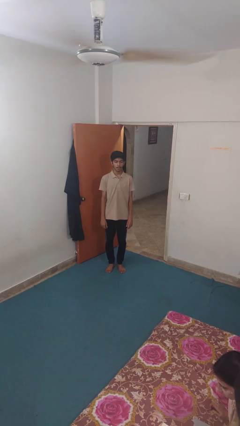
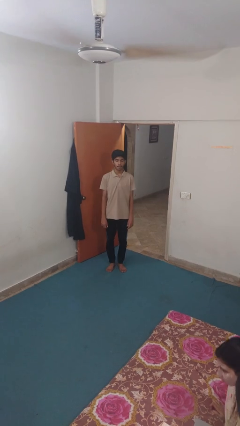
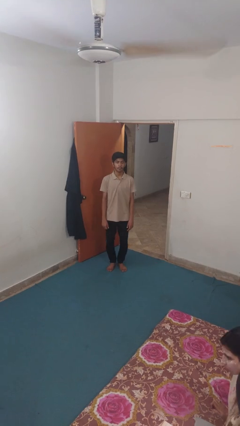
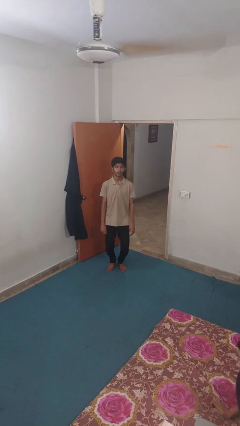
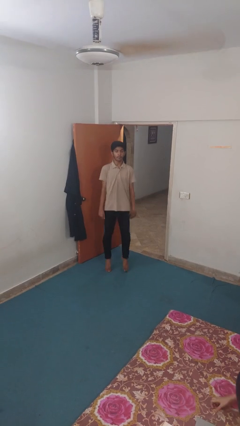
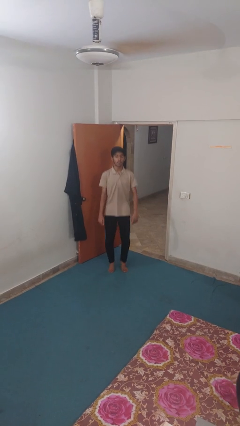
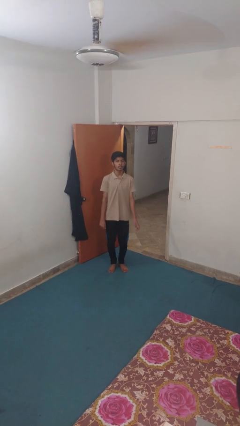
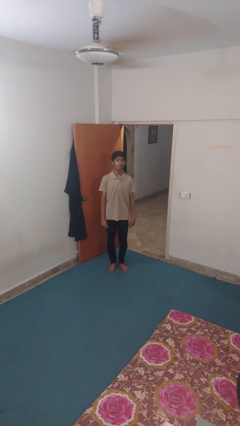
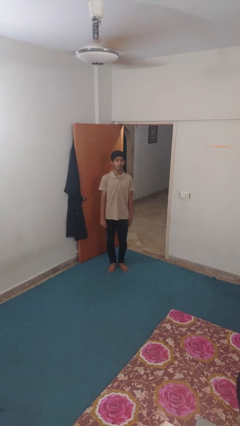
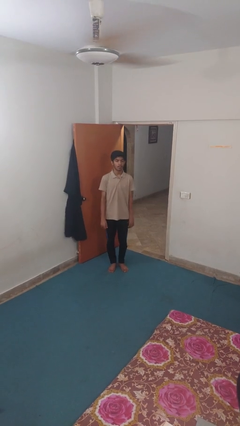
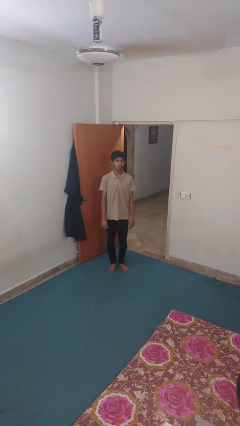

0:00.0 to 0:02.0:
person jumps

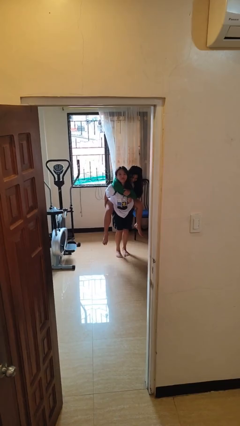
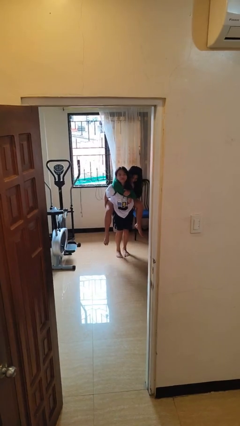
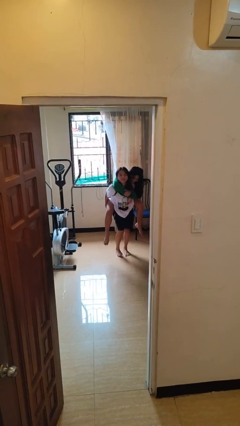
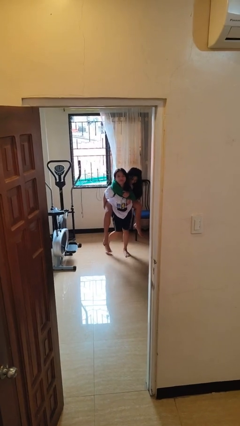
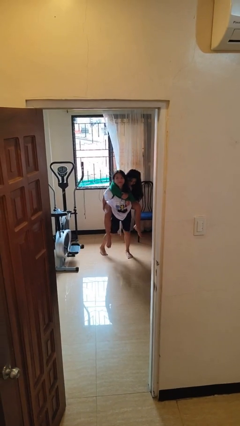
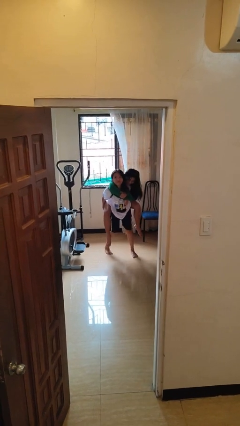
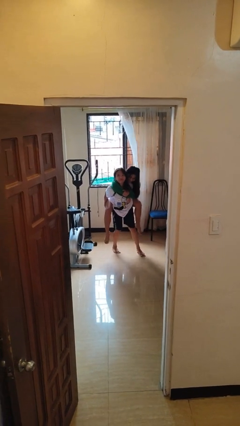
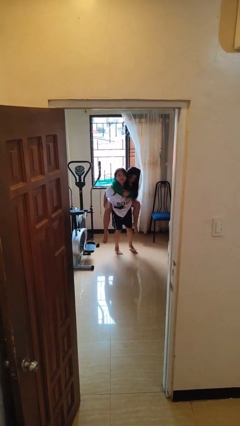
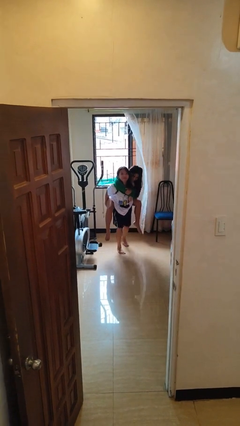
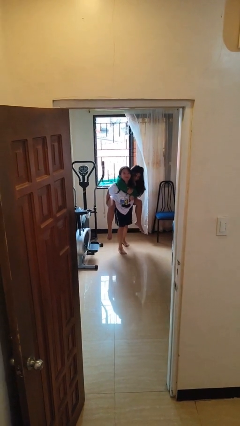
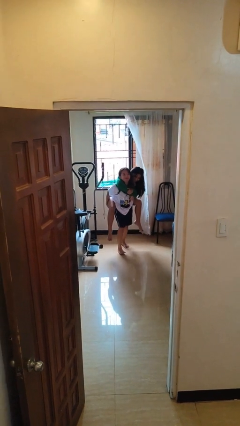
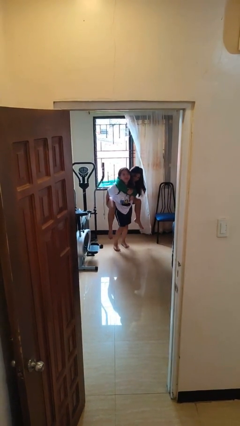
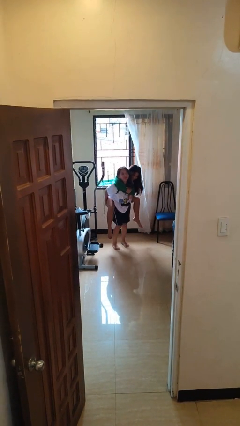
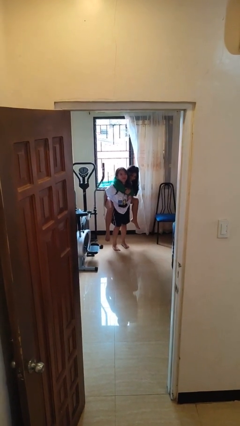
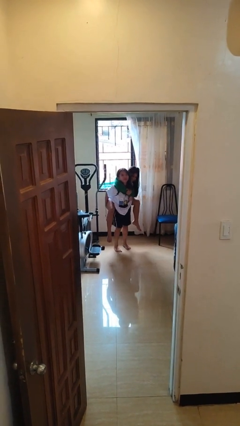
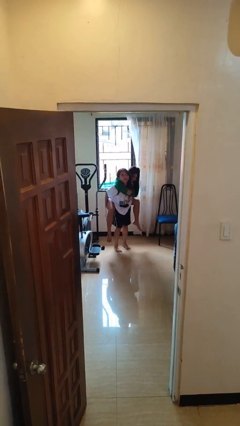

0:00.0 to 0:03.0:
person carries person on back

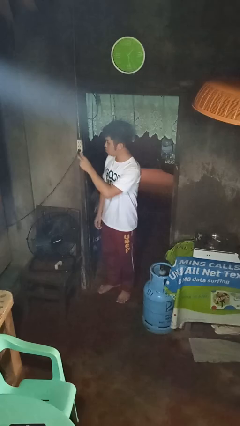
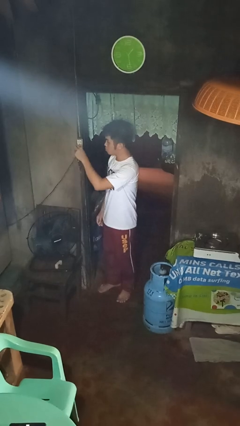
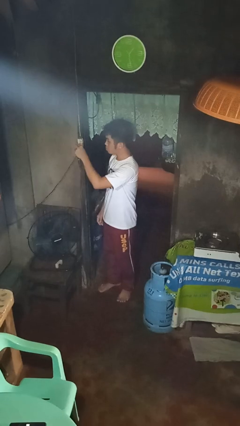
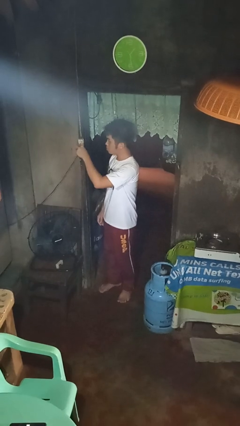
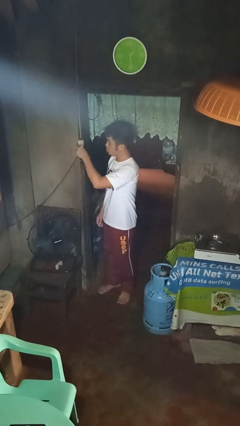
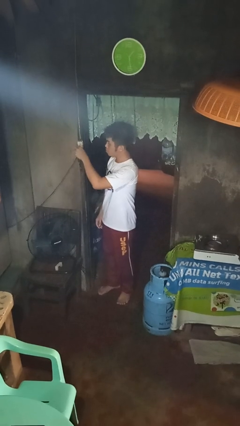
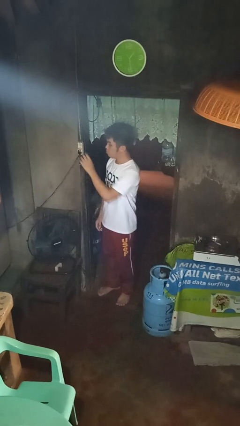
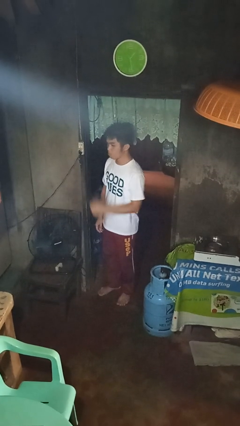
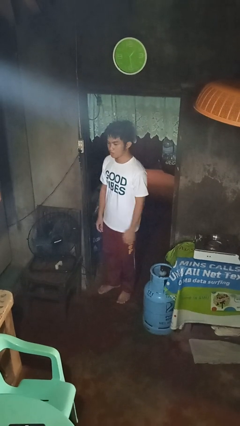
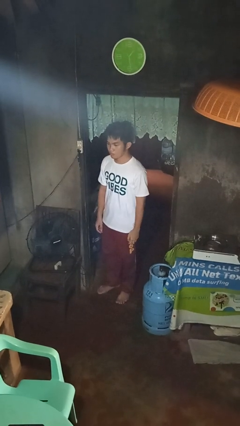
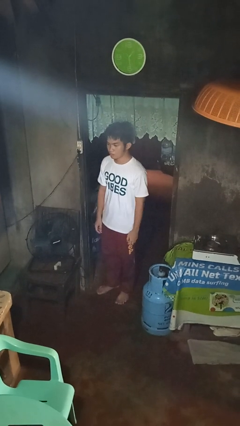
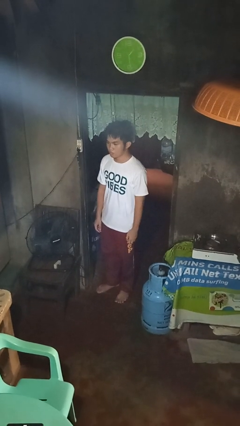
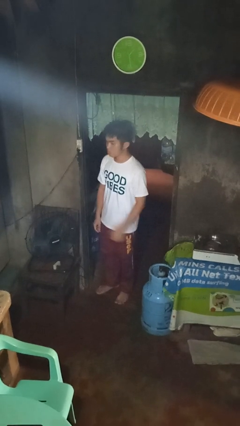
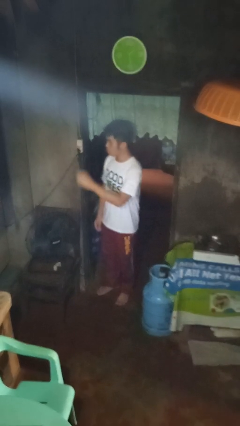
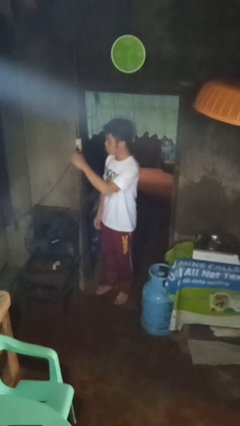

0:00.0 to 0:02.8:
person plugs into electrical socket

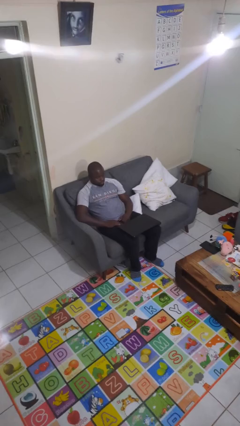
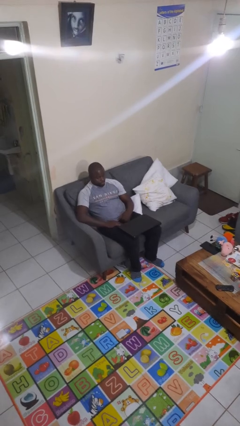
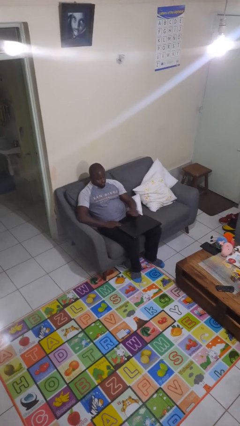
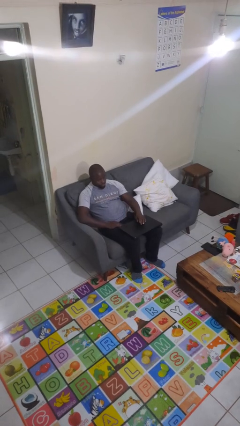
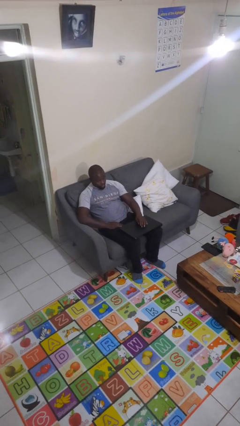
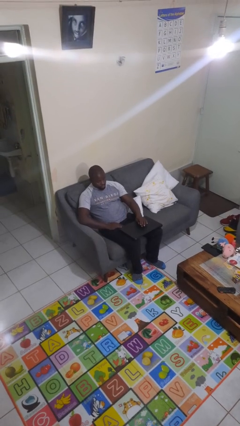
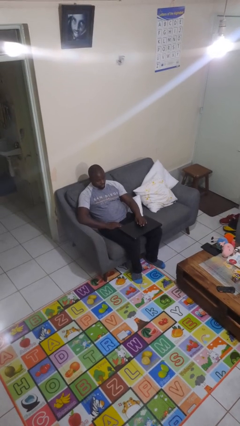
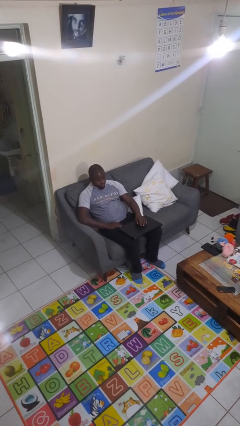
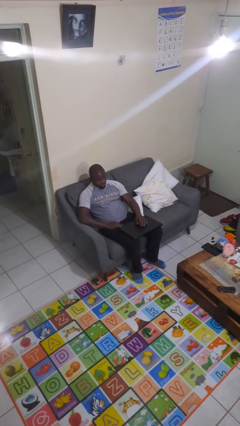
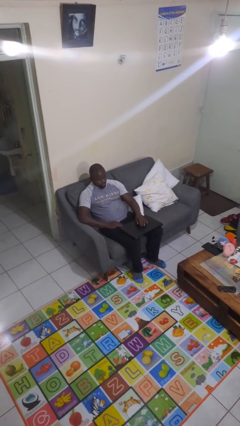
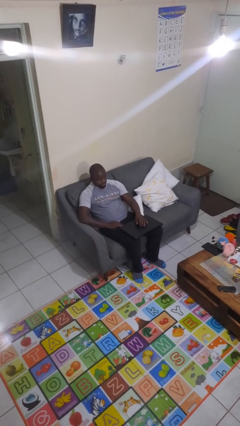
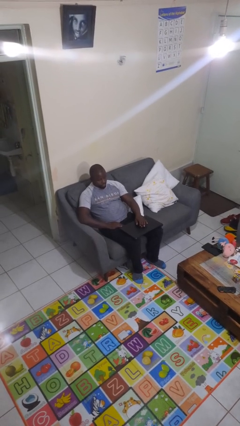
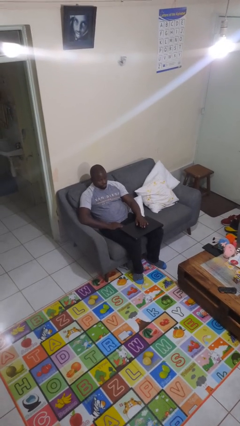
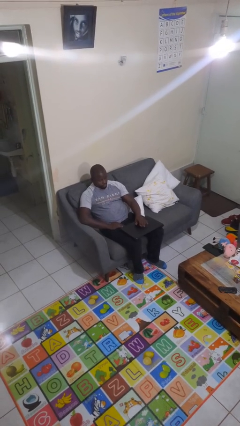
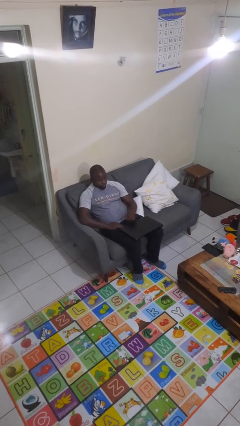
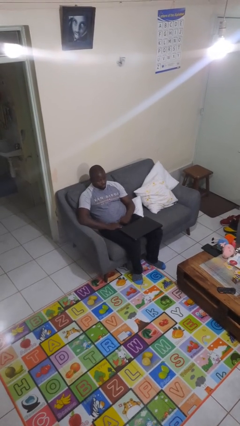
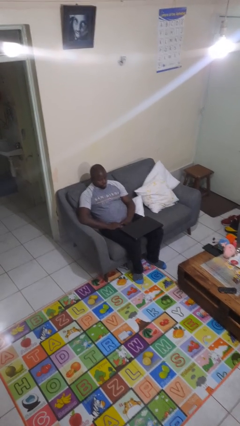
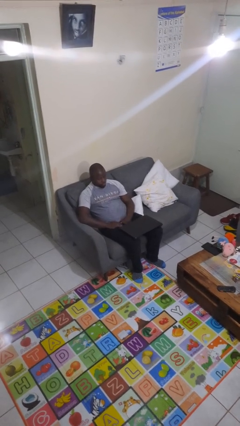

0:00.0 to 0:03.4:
person taps object with finger

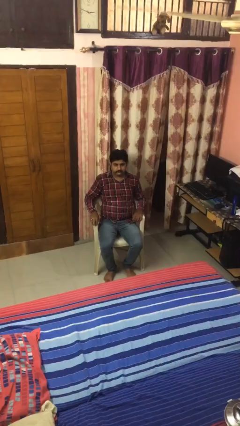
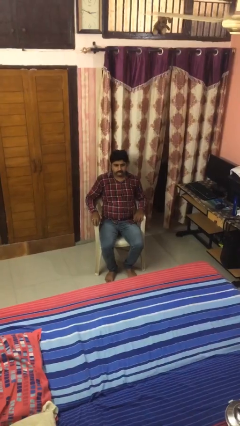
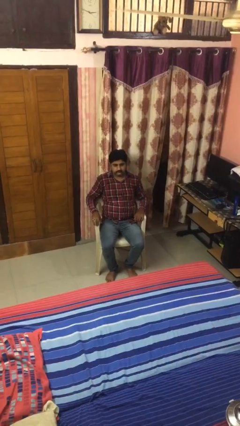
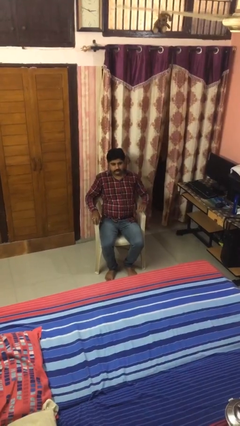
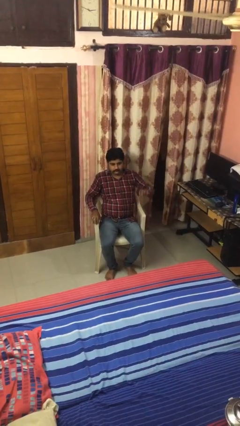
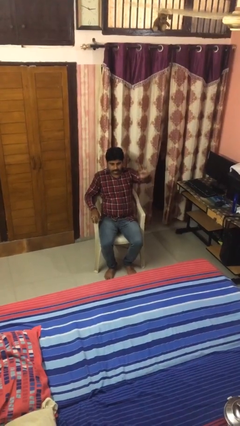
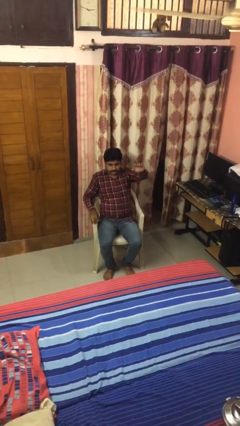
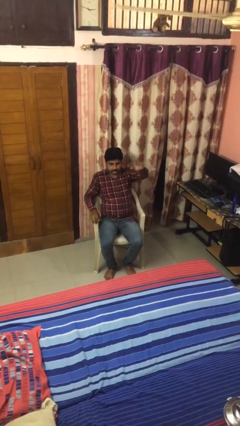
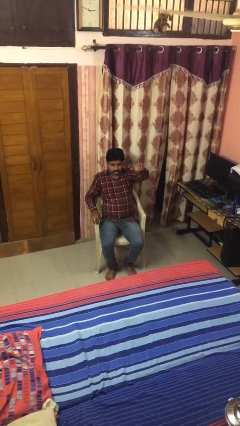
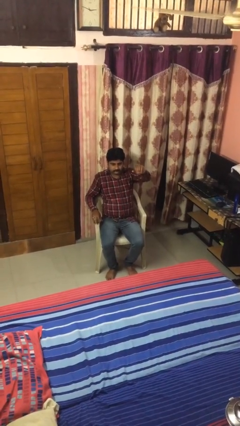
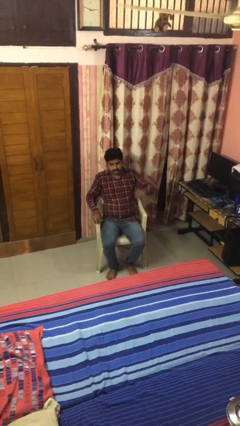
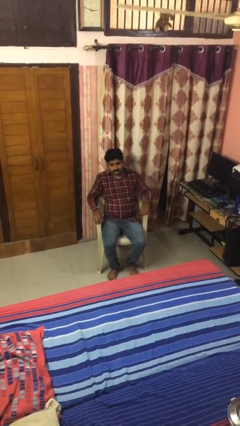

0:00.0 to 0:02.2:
person gestures come here

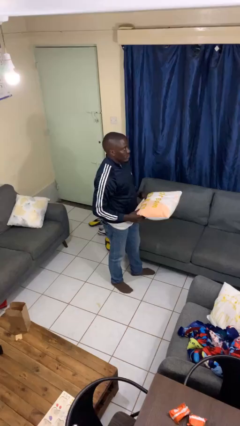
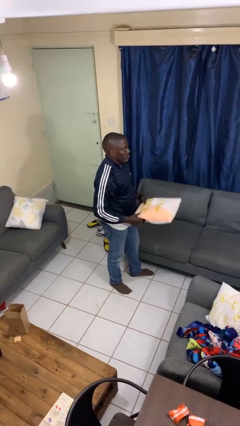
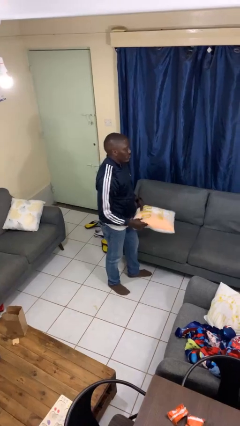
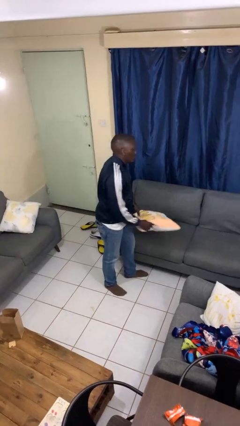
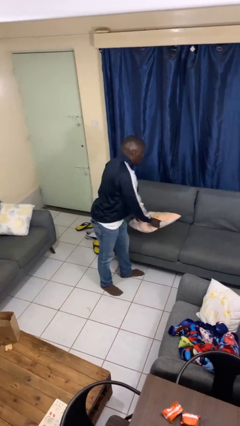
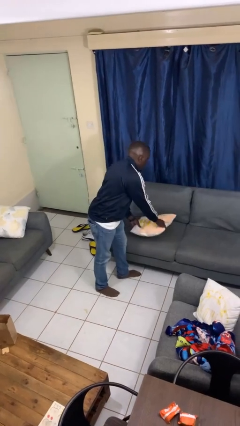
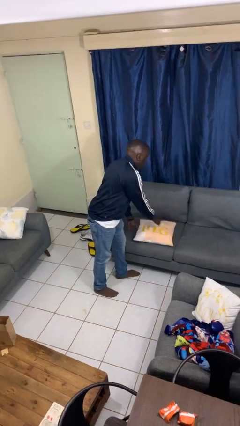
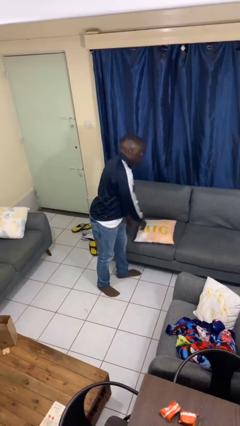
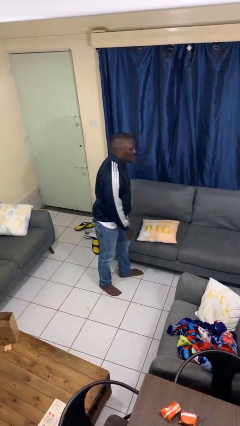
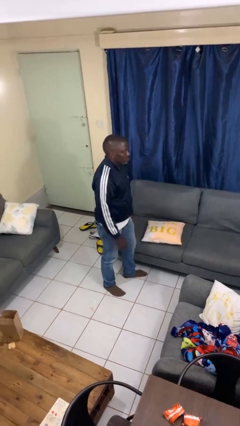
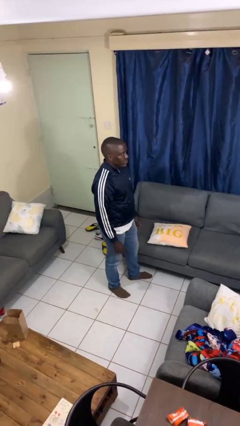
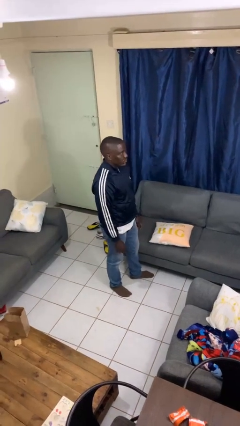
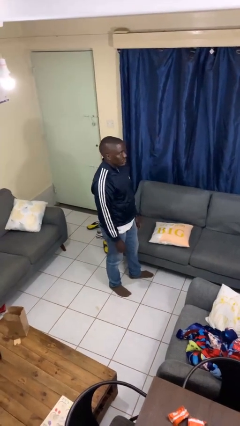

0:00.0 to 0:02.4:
person puts down object on couch

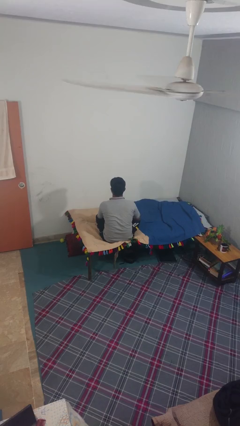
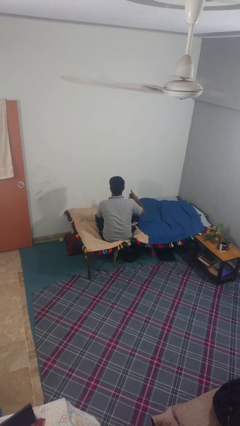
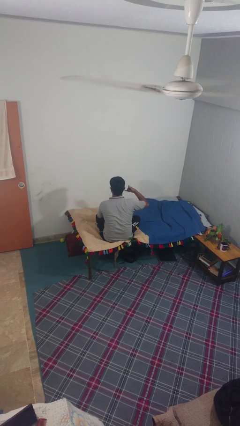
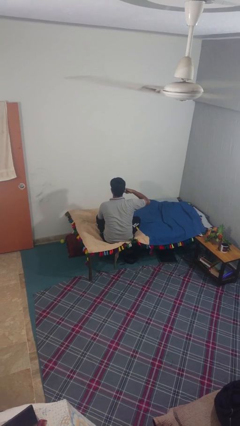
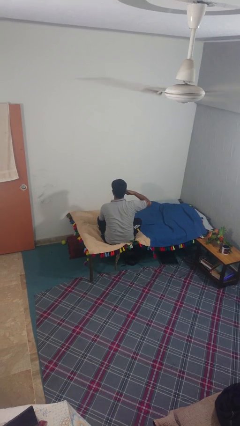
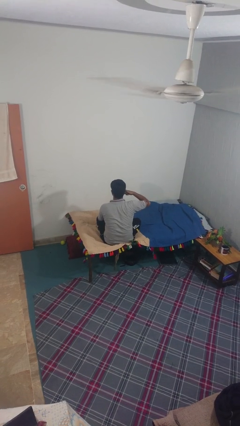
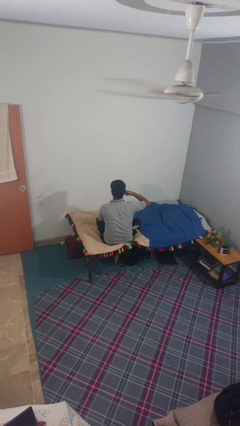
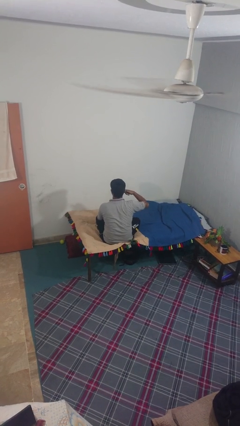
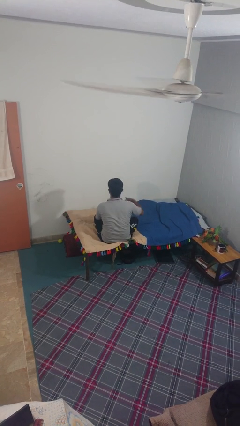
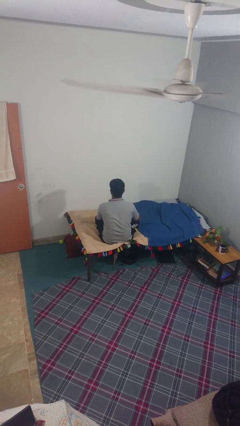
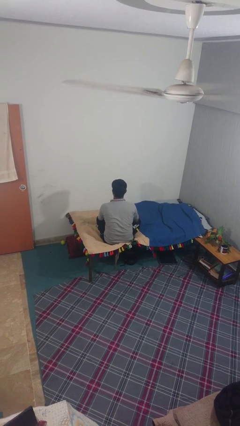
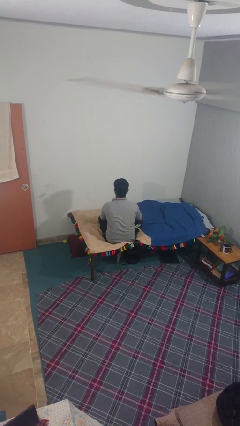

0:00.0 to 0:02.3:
person gestures call me
